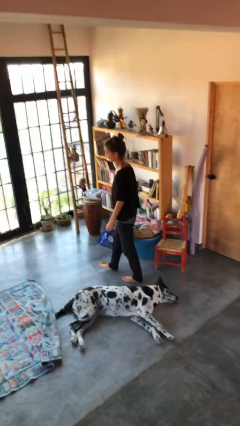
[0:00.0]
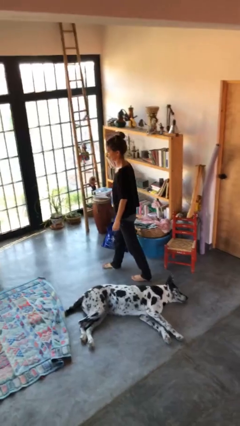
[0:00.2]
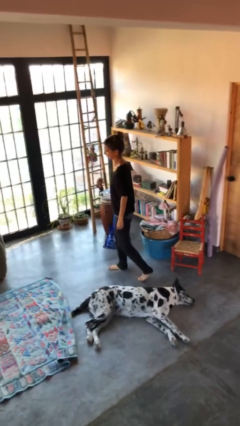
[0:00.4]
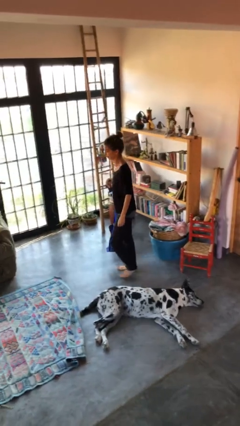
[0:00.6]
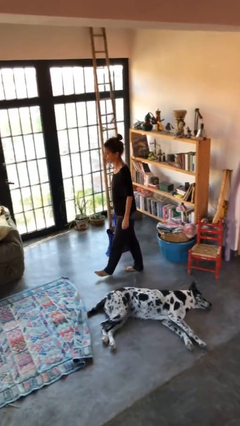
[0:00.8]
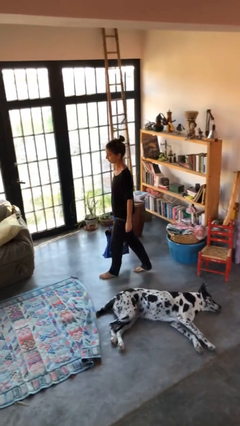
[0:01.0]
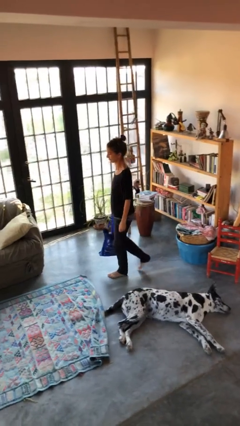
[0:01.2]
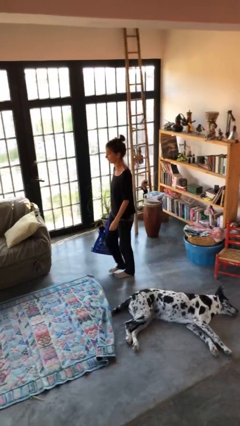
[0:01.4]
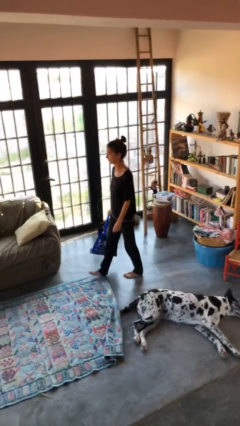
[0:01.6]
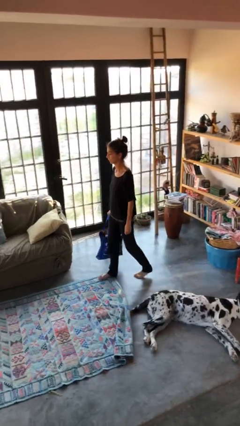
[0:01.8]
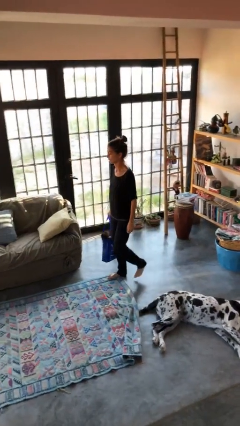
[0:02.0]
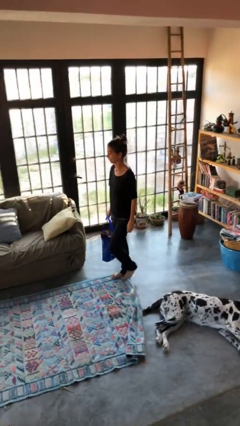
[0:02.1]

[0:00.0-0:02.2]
person carries groceries

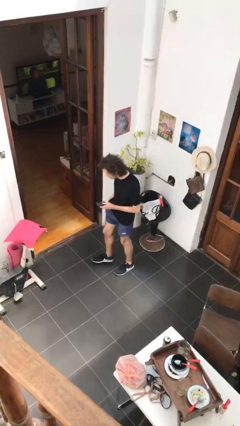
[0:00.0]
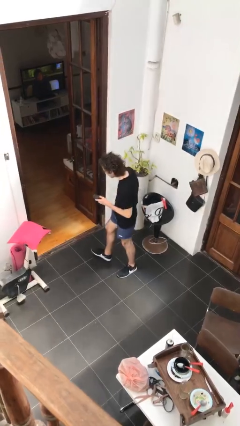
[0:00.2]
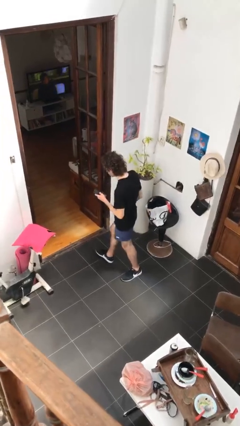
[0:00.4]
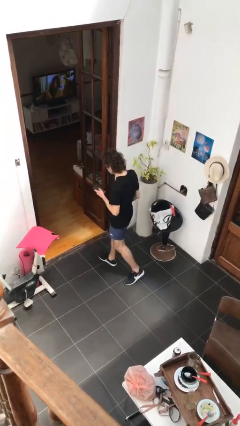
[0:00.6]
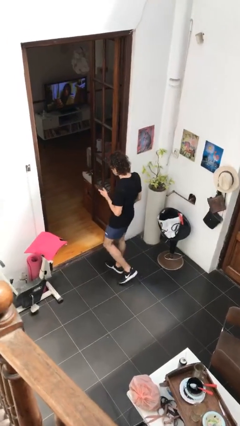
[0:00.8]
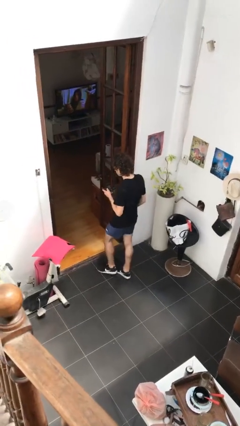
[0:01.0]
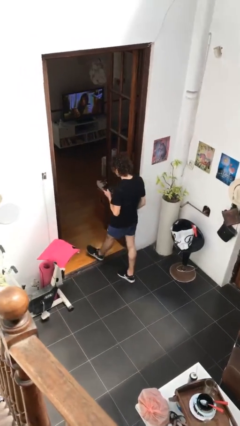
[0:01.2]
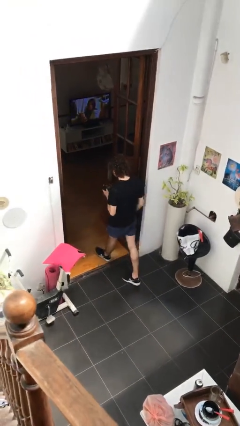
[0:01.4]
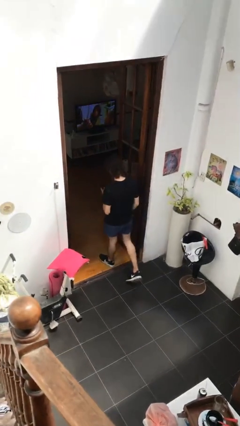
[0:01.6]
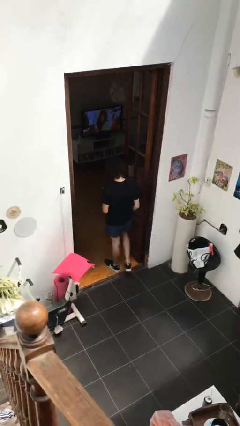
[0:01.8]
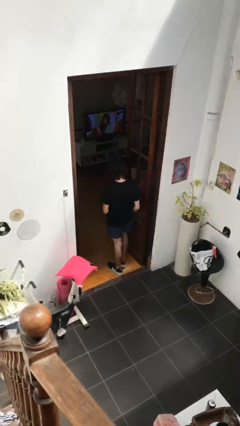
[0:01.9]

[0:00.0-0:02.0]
person exits scene through structure

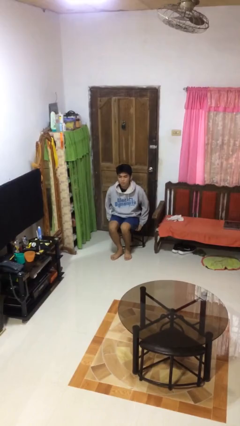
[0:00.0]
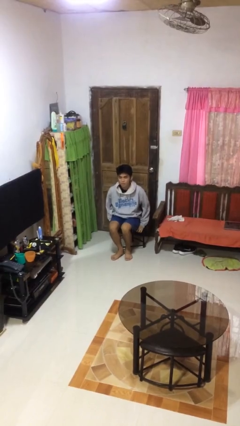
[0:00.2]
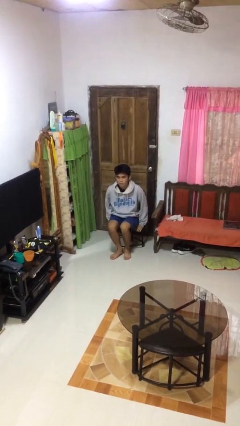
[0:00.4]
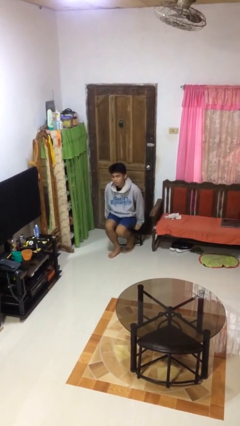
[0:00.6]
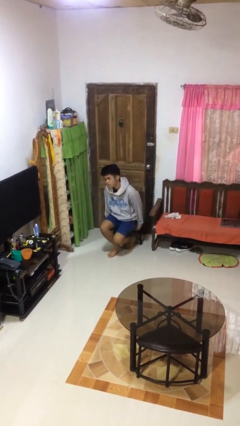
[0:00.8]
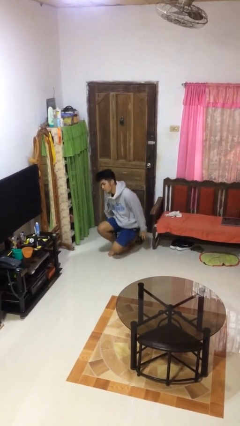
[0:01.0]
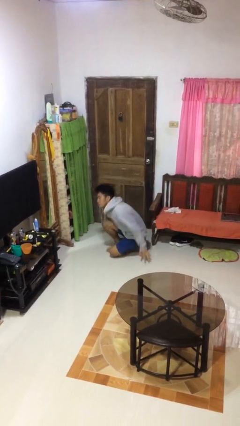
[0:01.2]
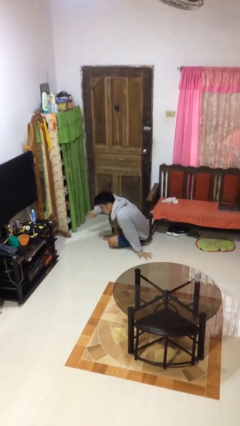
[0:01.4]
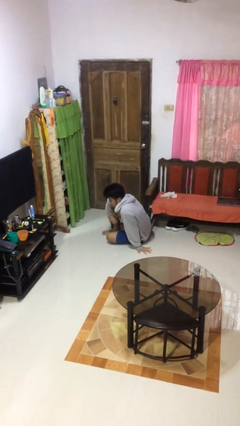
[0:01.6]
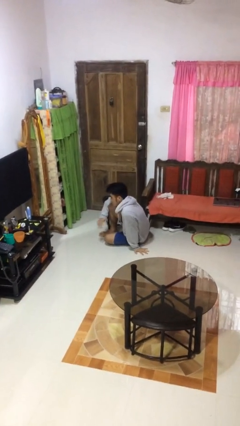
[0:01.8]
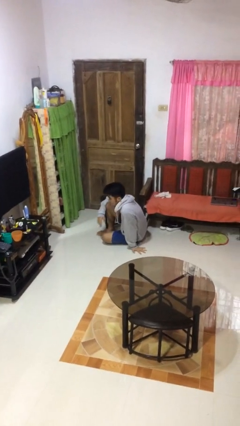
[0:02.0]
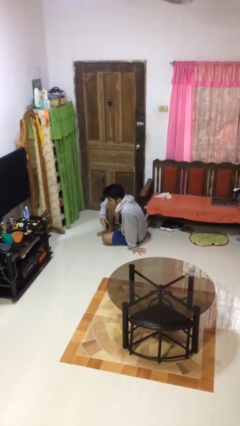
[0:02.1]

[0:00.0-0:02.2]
person falls from chair

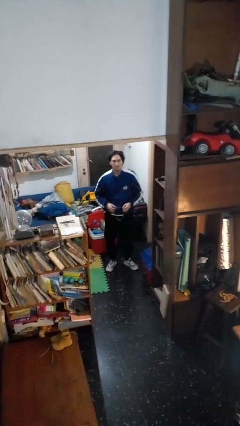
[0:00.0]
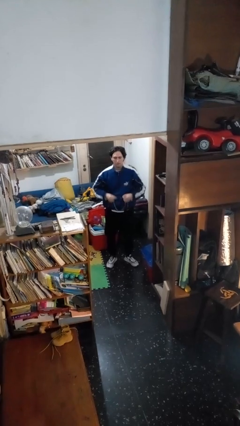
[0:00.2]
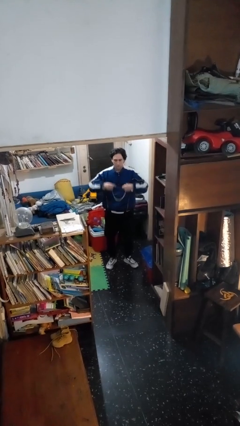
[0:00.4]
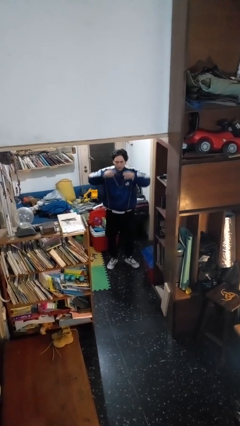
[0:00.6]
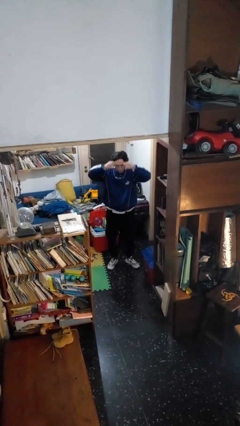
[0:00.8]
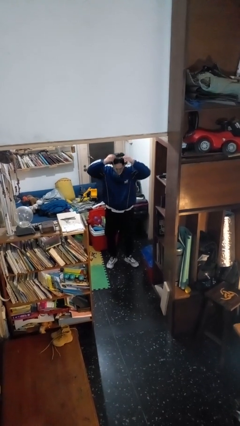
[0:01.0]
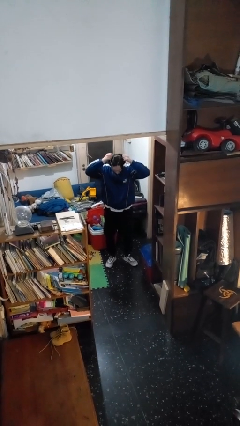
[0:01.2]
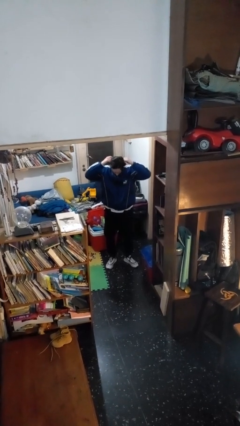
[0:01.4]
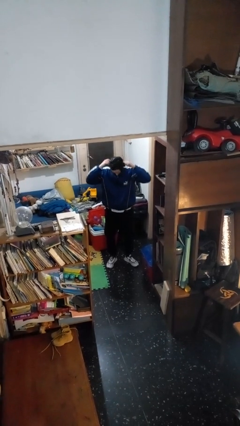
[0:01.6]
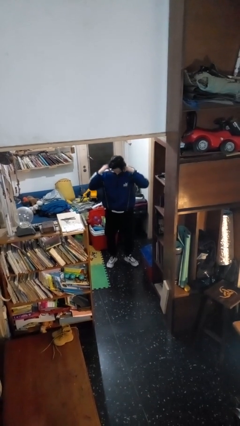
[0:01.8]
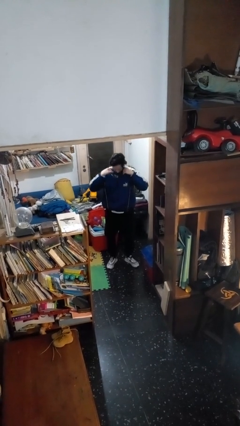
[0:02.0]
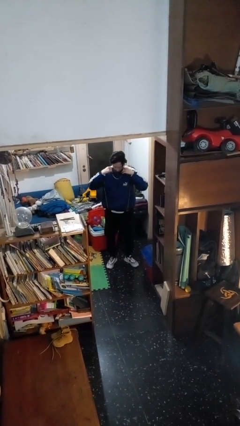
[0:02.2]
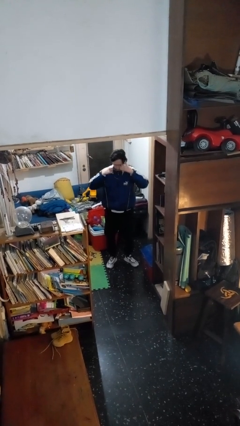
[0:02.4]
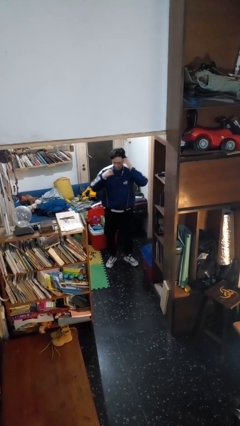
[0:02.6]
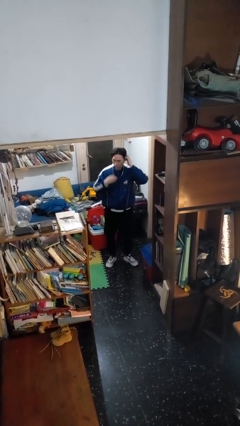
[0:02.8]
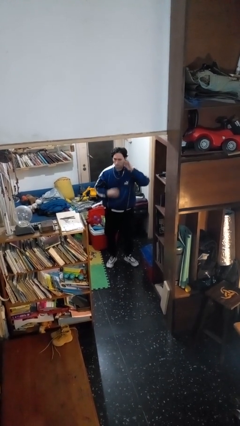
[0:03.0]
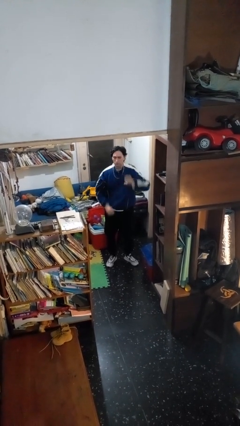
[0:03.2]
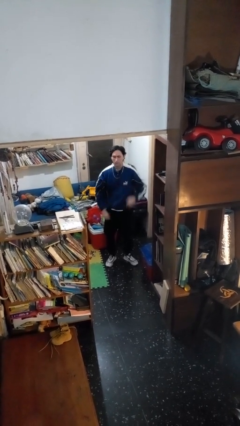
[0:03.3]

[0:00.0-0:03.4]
person puts on necklace

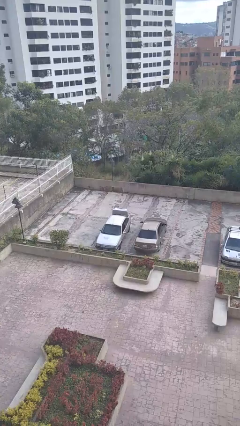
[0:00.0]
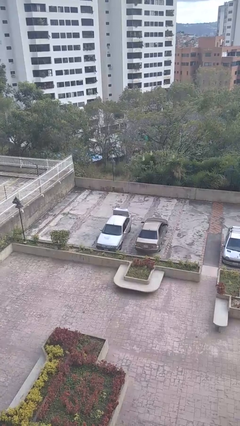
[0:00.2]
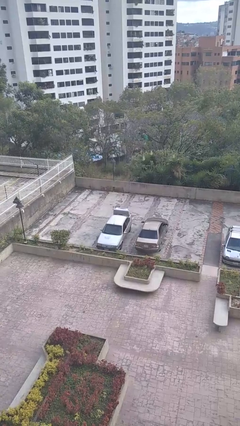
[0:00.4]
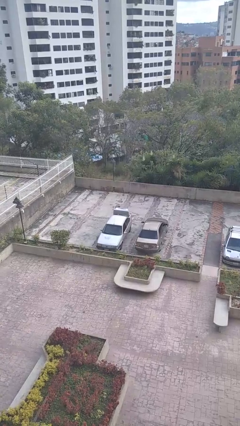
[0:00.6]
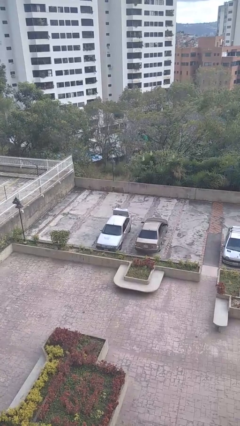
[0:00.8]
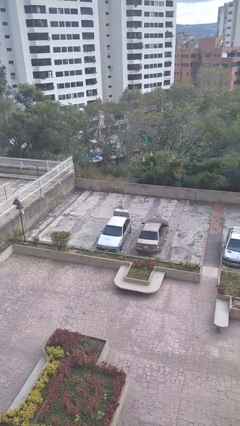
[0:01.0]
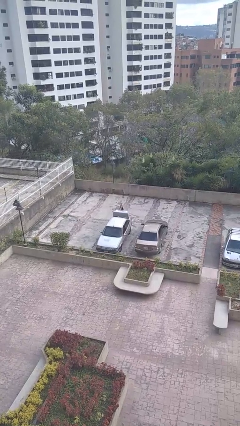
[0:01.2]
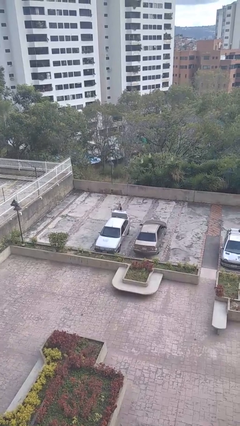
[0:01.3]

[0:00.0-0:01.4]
person unloads car

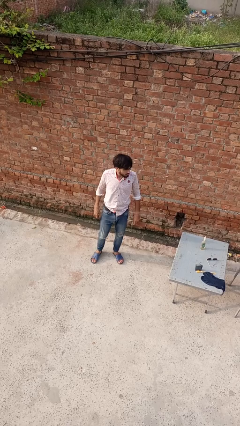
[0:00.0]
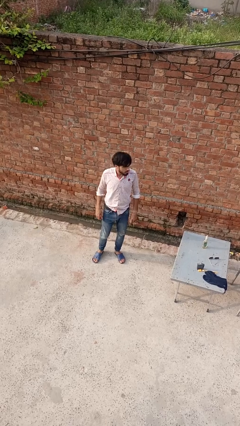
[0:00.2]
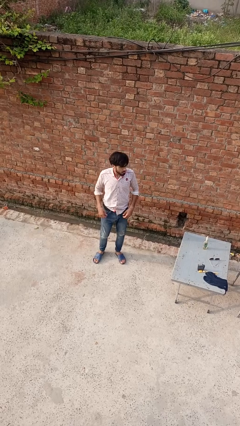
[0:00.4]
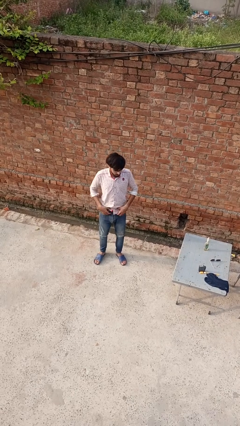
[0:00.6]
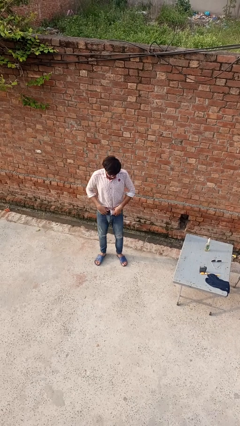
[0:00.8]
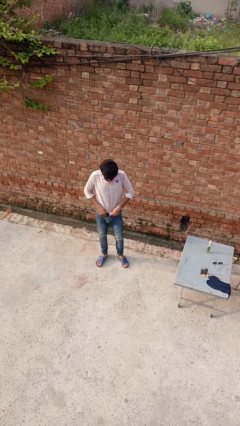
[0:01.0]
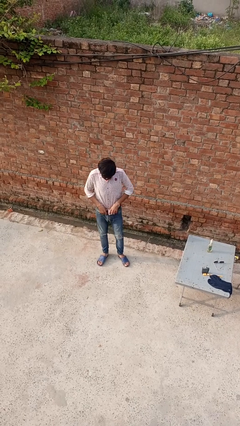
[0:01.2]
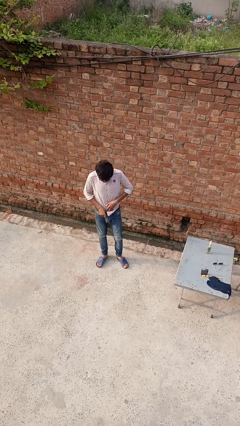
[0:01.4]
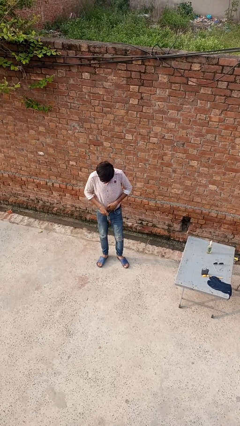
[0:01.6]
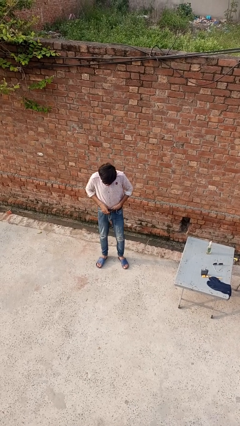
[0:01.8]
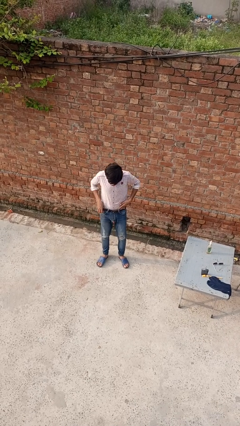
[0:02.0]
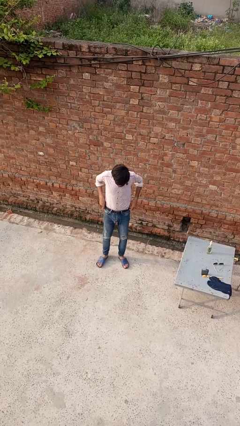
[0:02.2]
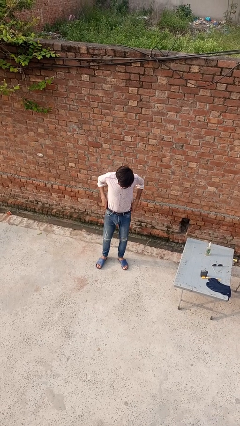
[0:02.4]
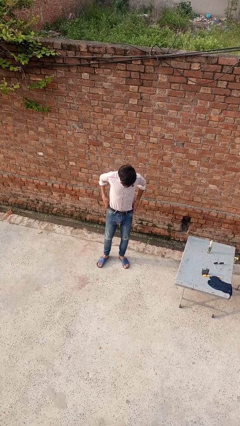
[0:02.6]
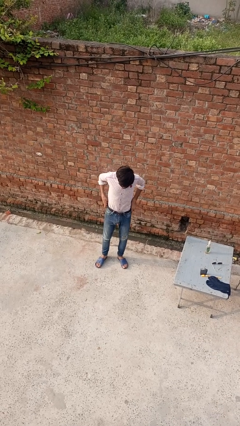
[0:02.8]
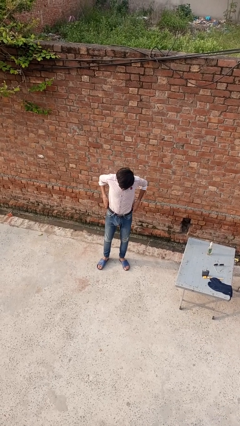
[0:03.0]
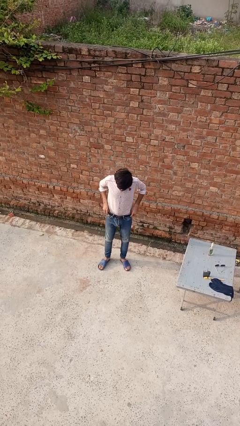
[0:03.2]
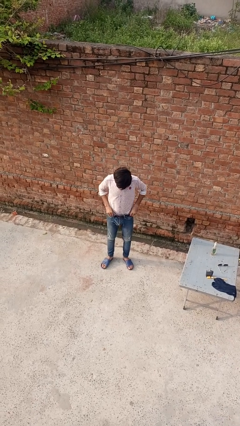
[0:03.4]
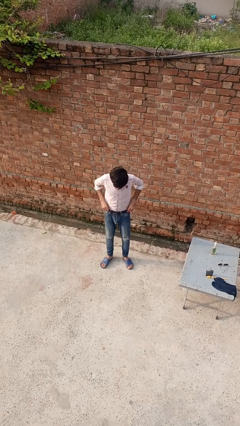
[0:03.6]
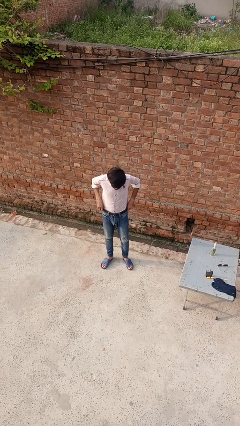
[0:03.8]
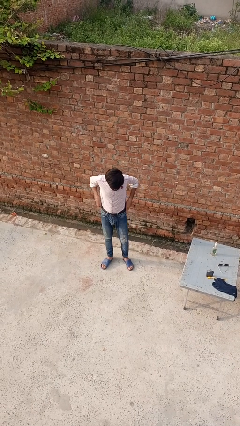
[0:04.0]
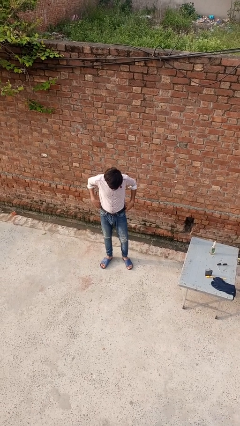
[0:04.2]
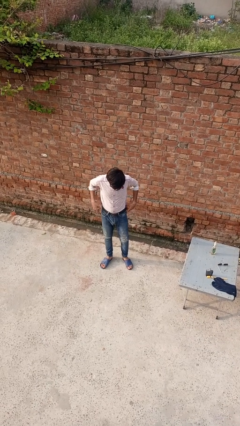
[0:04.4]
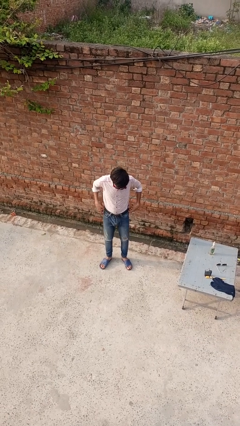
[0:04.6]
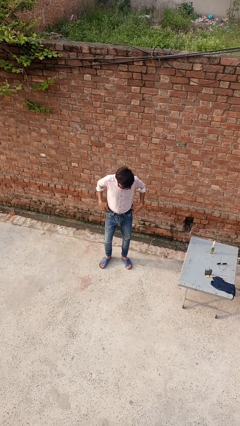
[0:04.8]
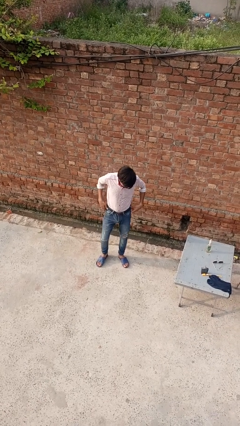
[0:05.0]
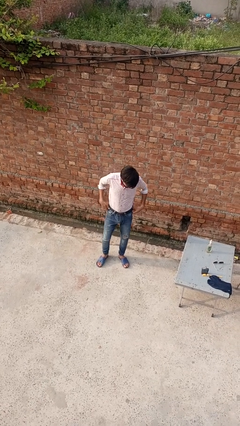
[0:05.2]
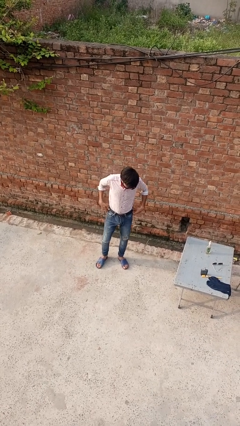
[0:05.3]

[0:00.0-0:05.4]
person hikes up pants

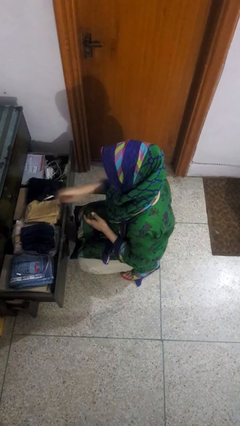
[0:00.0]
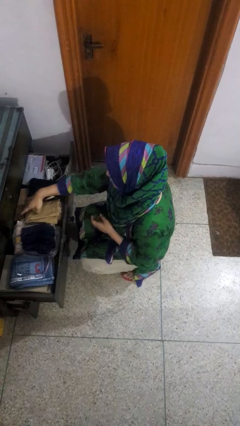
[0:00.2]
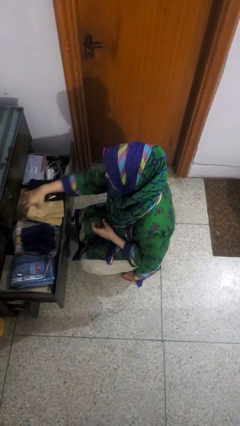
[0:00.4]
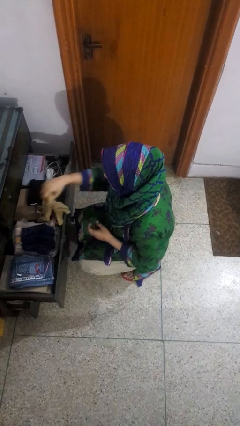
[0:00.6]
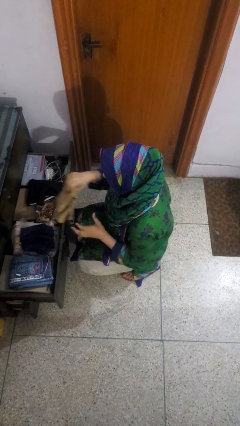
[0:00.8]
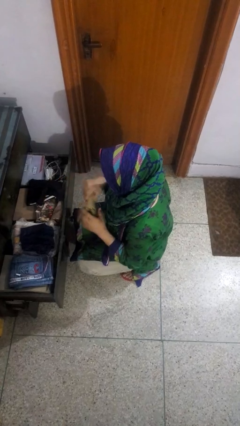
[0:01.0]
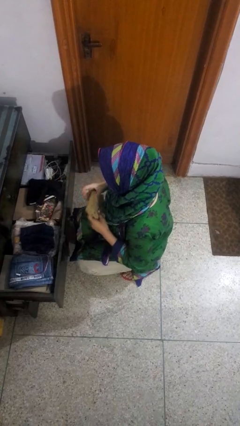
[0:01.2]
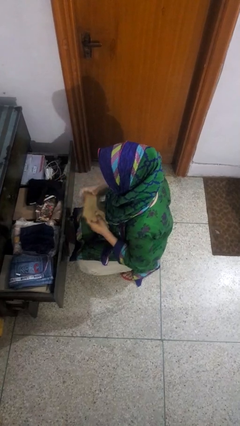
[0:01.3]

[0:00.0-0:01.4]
person takes clothes from dresser
